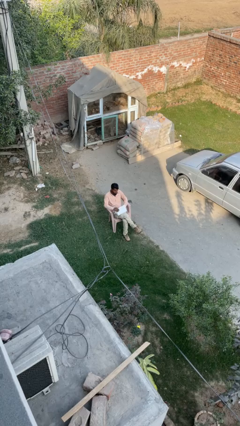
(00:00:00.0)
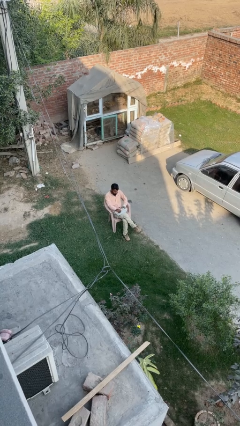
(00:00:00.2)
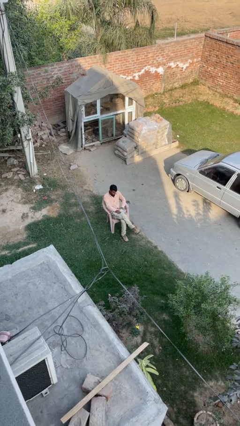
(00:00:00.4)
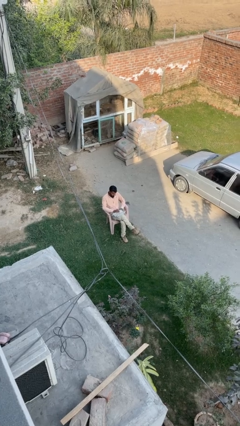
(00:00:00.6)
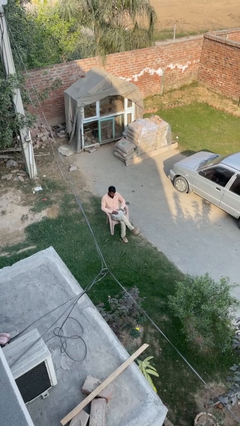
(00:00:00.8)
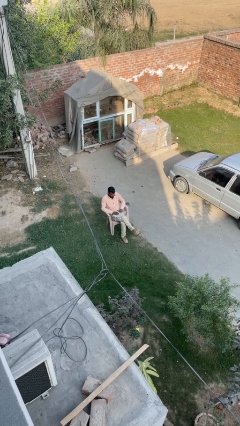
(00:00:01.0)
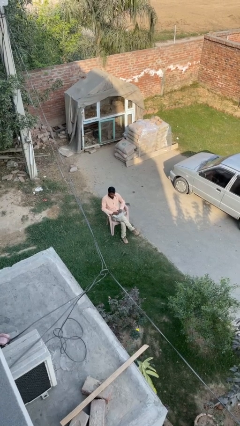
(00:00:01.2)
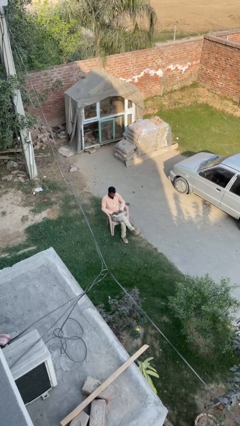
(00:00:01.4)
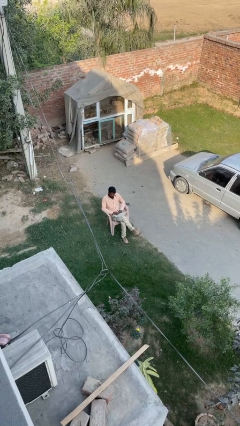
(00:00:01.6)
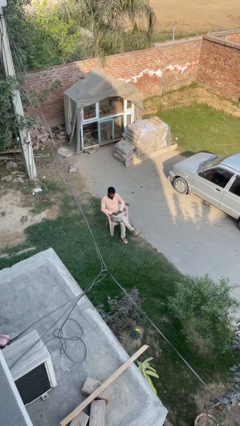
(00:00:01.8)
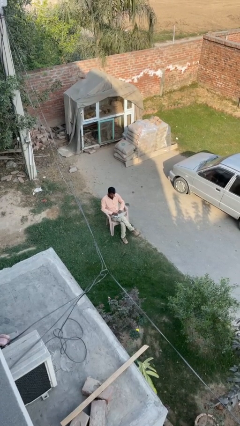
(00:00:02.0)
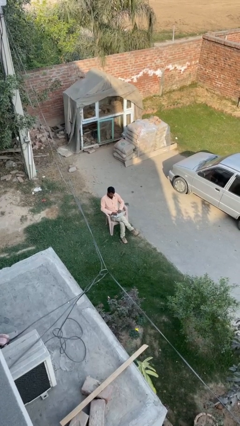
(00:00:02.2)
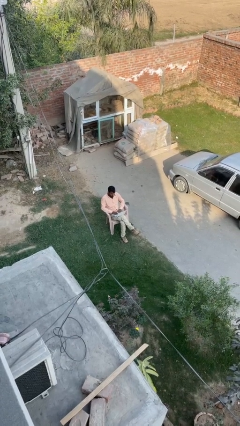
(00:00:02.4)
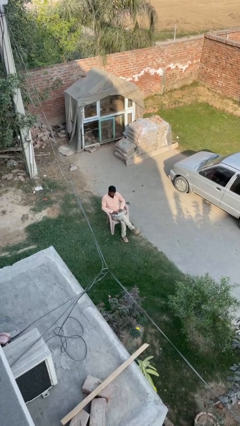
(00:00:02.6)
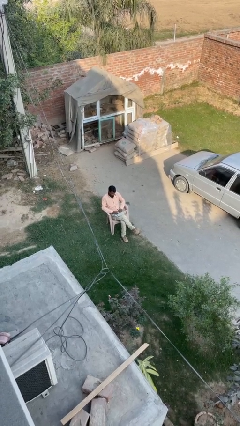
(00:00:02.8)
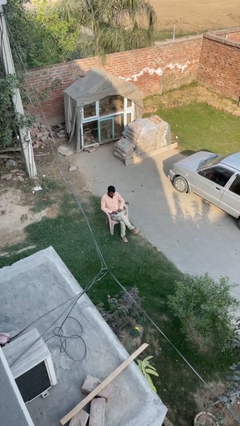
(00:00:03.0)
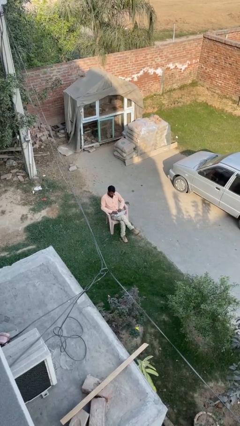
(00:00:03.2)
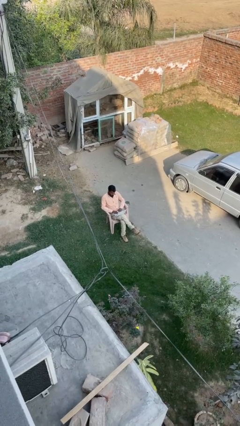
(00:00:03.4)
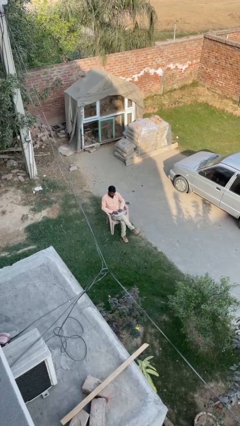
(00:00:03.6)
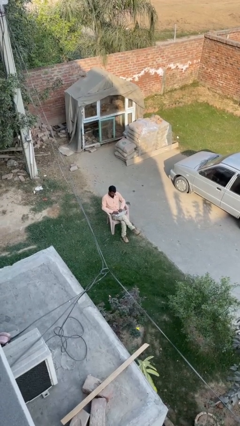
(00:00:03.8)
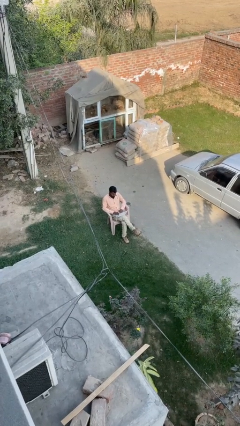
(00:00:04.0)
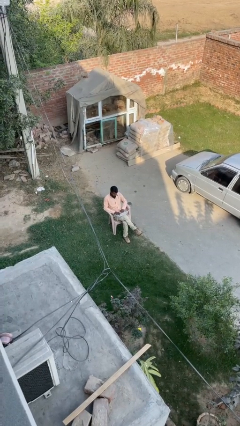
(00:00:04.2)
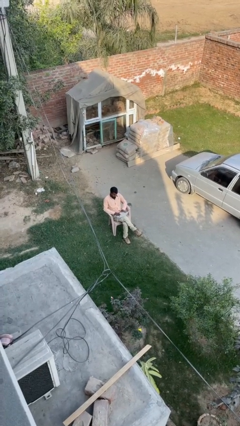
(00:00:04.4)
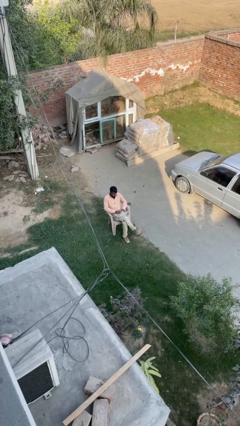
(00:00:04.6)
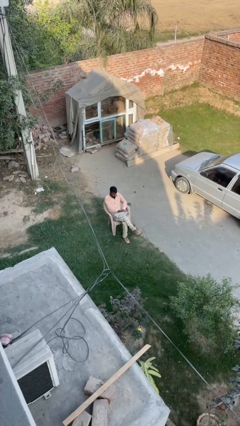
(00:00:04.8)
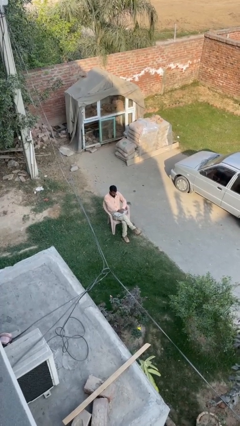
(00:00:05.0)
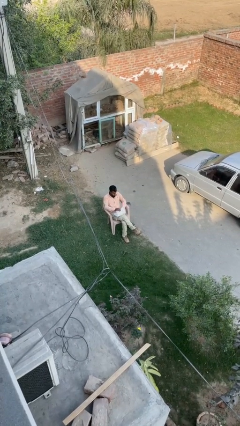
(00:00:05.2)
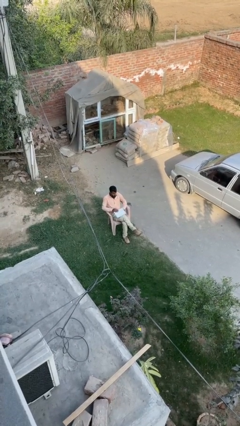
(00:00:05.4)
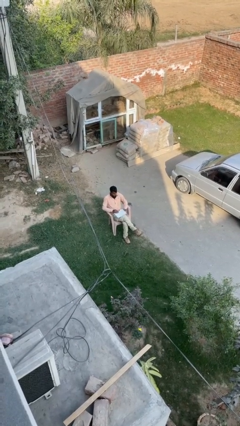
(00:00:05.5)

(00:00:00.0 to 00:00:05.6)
person interacts with laptop

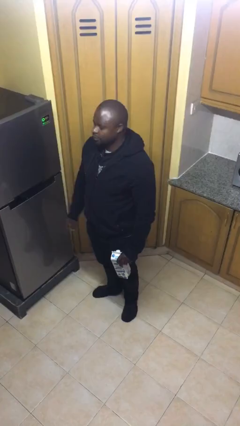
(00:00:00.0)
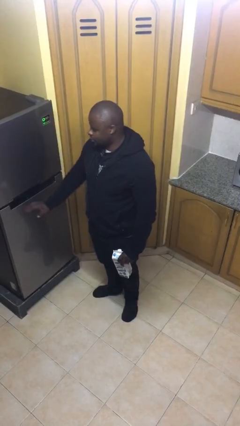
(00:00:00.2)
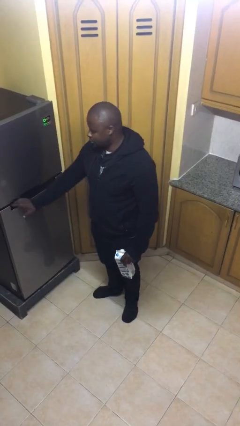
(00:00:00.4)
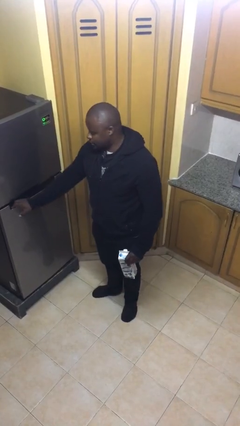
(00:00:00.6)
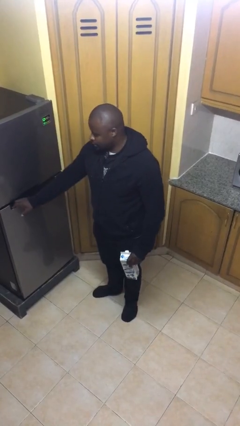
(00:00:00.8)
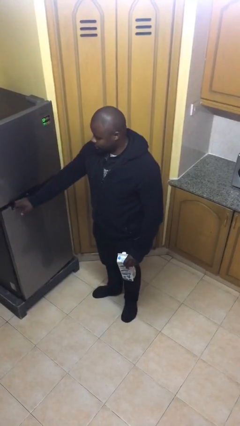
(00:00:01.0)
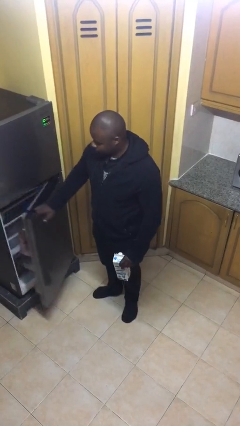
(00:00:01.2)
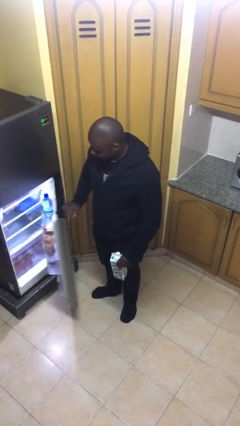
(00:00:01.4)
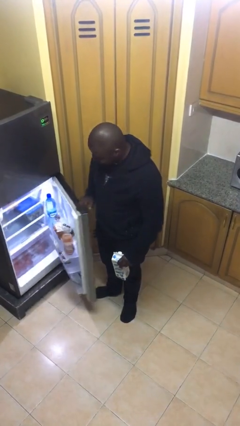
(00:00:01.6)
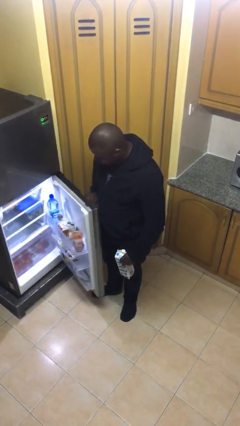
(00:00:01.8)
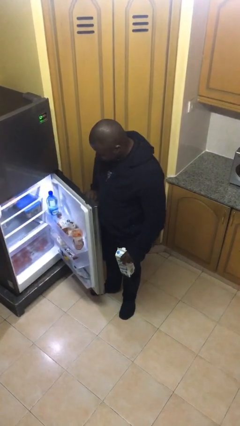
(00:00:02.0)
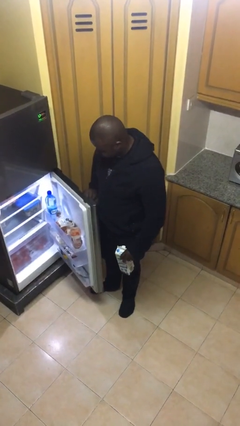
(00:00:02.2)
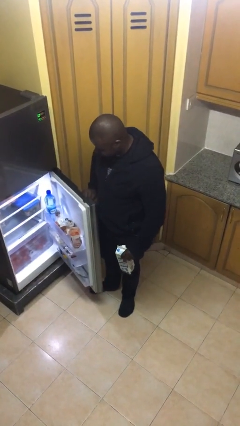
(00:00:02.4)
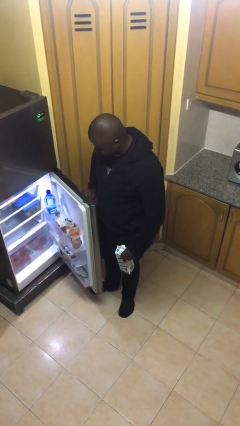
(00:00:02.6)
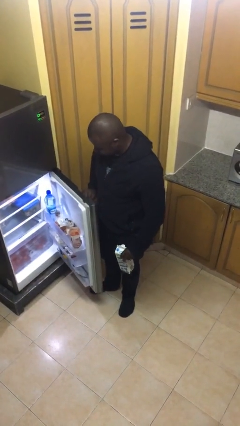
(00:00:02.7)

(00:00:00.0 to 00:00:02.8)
person opens refrigerator

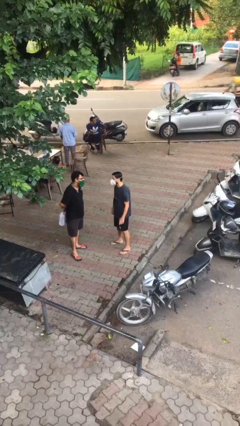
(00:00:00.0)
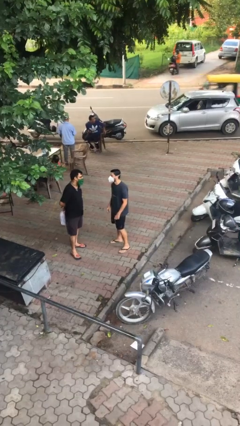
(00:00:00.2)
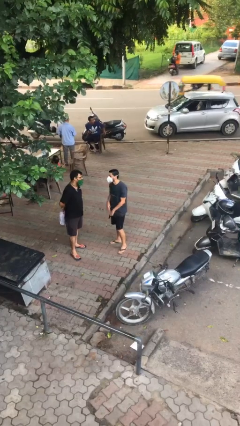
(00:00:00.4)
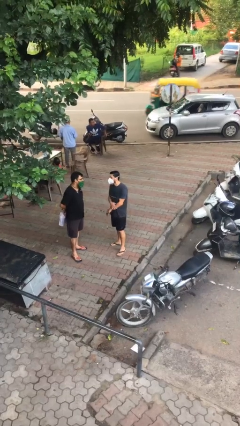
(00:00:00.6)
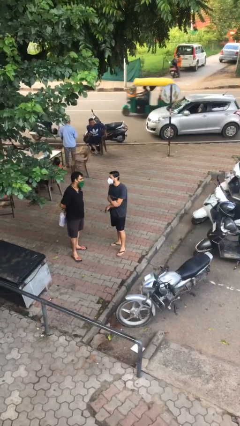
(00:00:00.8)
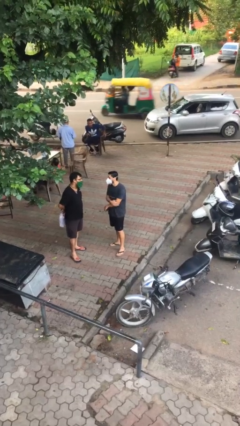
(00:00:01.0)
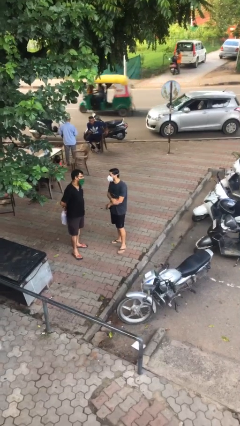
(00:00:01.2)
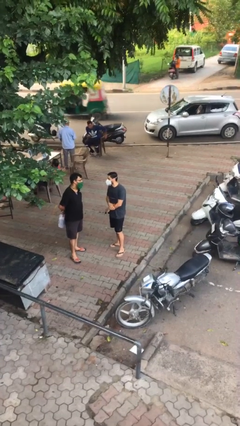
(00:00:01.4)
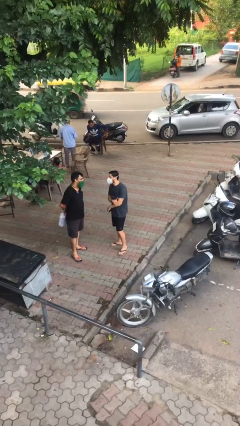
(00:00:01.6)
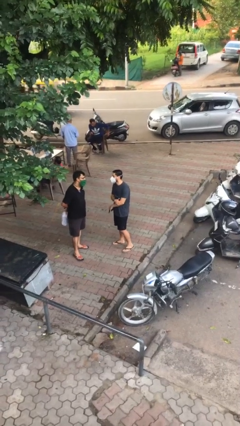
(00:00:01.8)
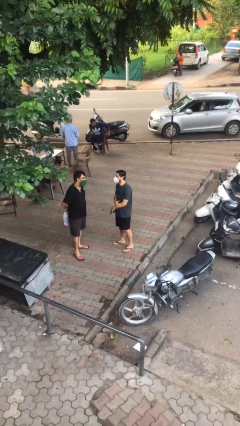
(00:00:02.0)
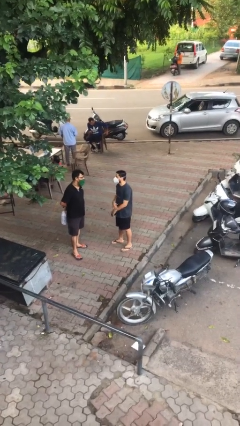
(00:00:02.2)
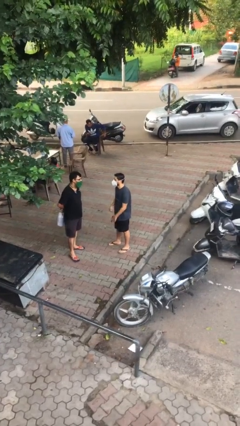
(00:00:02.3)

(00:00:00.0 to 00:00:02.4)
person talks to person

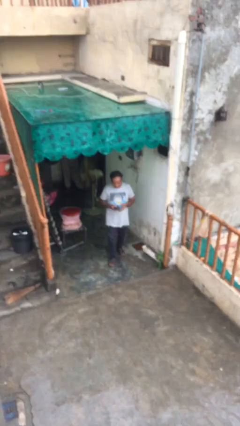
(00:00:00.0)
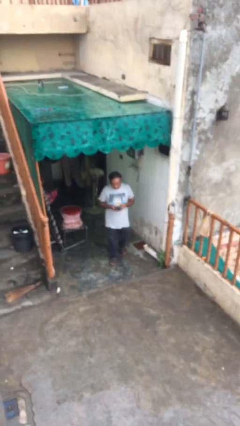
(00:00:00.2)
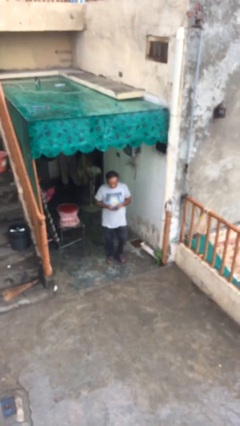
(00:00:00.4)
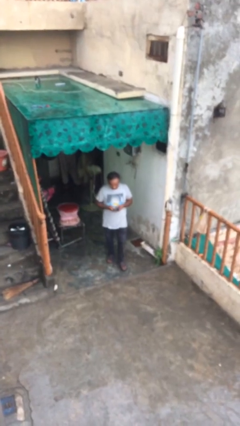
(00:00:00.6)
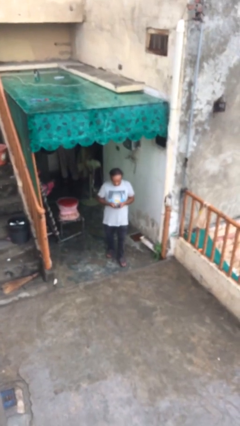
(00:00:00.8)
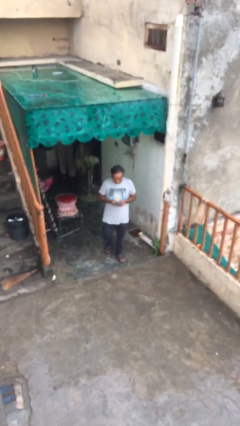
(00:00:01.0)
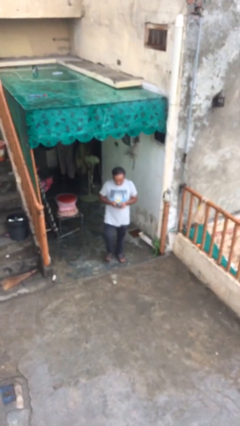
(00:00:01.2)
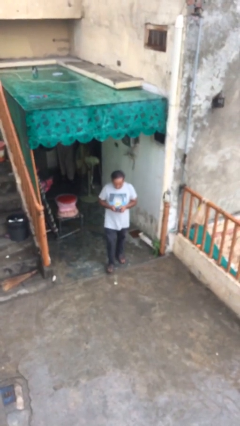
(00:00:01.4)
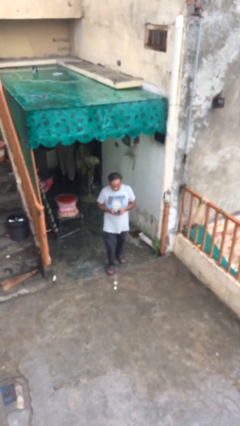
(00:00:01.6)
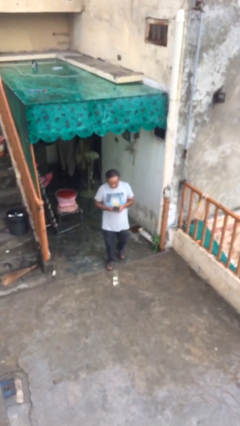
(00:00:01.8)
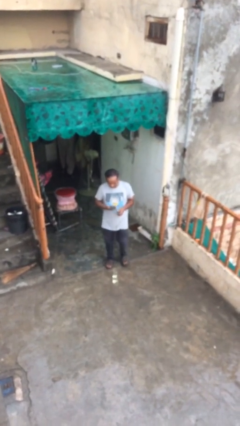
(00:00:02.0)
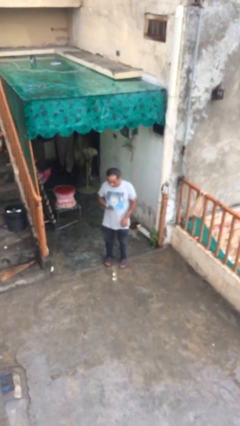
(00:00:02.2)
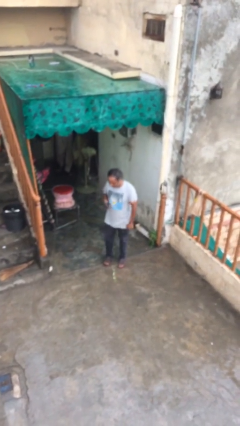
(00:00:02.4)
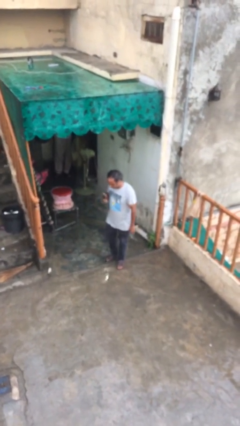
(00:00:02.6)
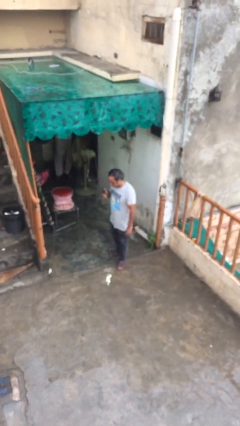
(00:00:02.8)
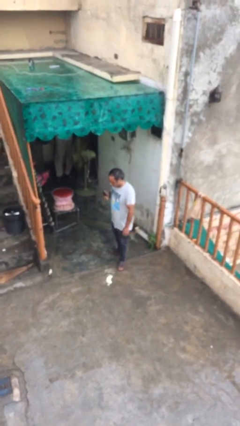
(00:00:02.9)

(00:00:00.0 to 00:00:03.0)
person texts on phone

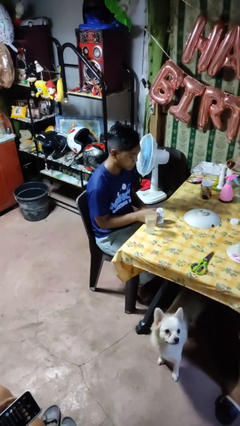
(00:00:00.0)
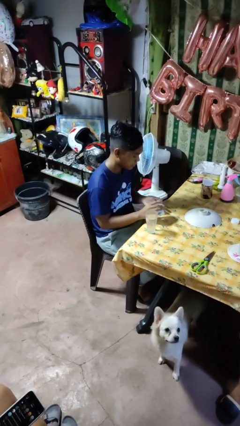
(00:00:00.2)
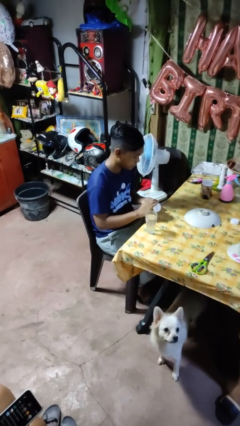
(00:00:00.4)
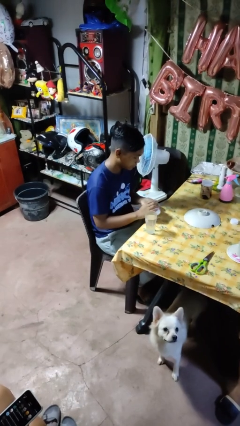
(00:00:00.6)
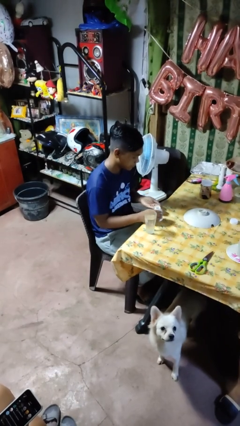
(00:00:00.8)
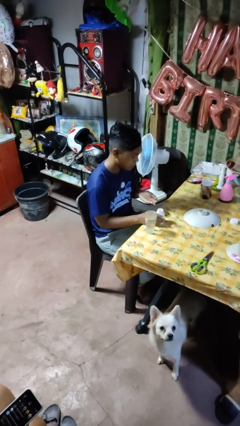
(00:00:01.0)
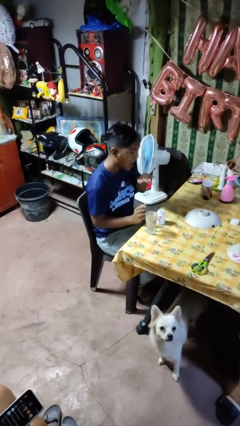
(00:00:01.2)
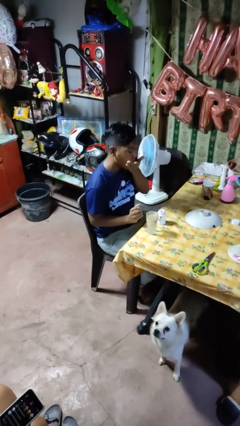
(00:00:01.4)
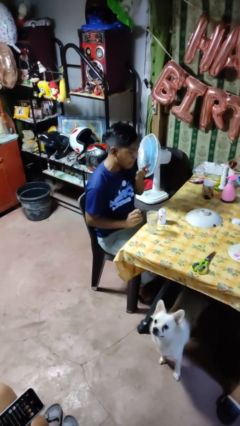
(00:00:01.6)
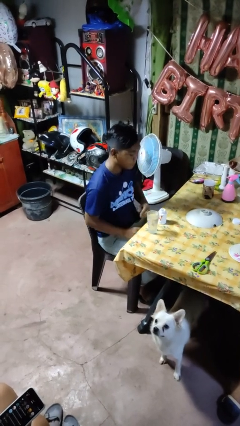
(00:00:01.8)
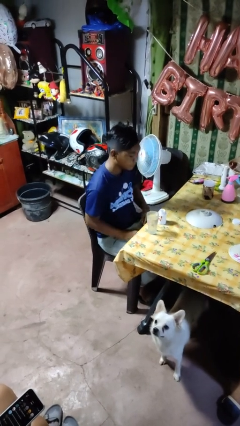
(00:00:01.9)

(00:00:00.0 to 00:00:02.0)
person takes medicine pills

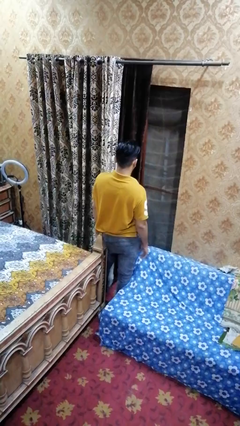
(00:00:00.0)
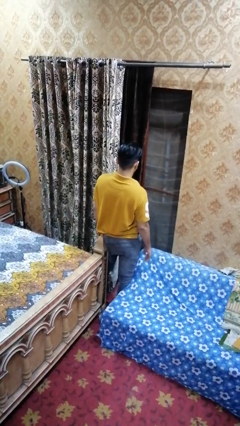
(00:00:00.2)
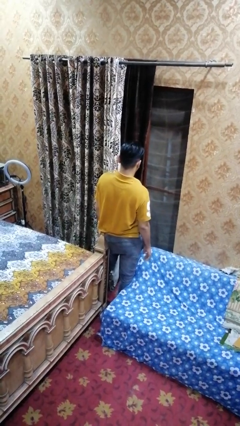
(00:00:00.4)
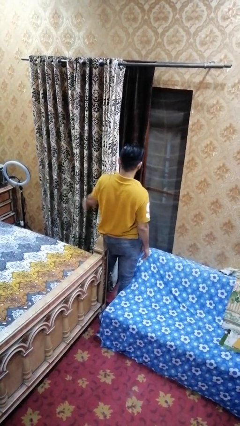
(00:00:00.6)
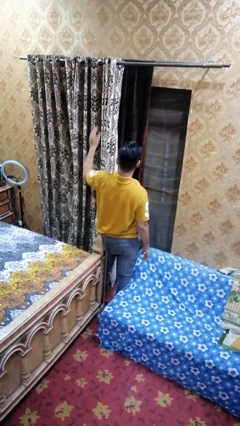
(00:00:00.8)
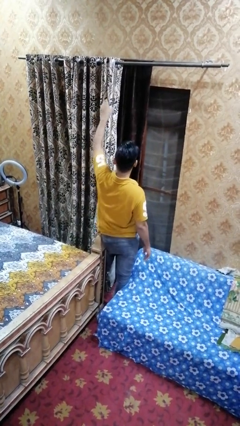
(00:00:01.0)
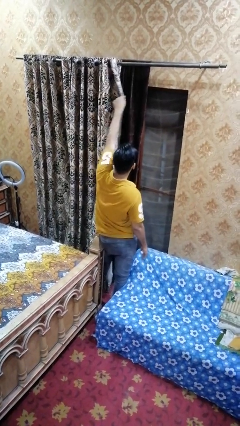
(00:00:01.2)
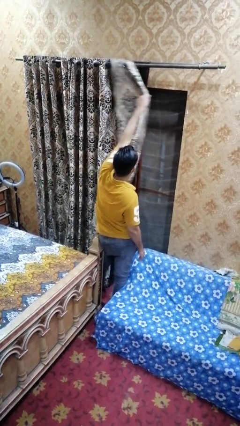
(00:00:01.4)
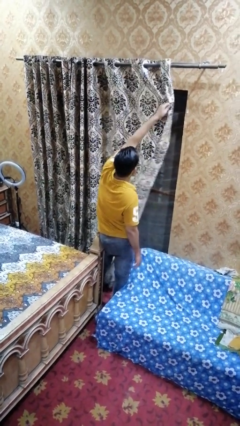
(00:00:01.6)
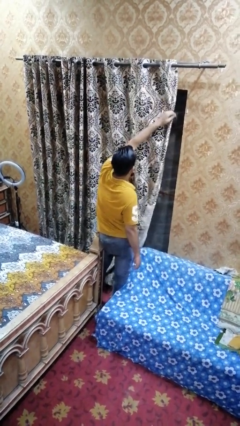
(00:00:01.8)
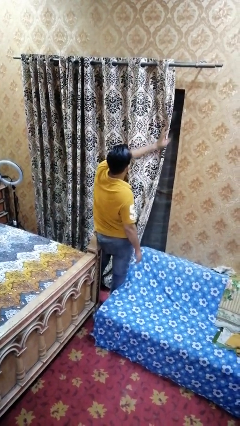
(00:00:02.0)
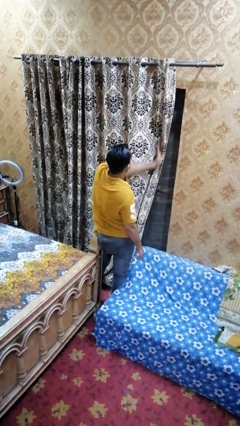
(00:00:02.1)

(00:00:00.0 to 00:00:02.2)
person closes curtains
